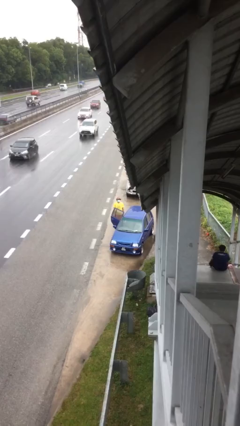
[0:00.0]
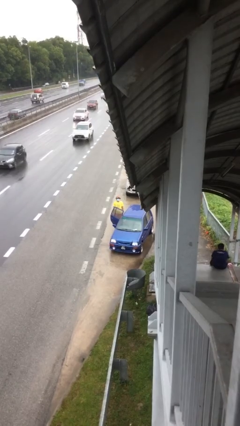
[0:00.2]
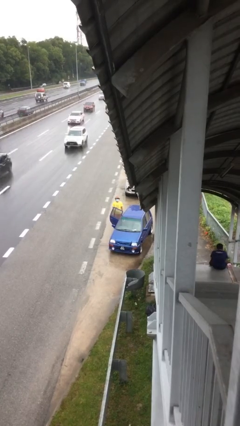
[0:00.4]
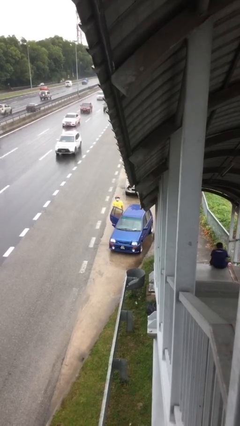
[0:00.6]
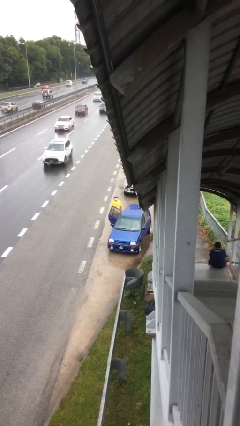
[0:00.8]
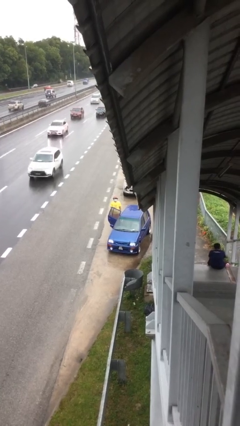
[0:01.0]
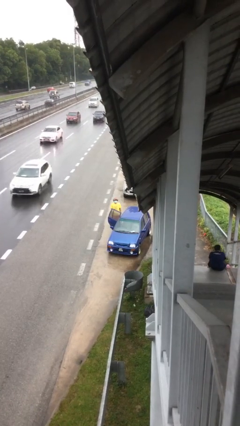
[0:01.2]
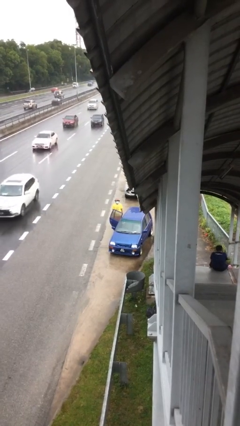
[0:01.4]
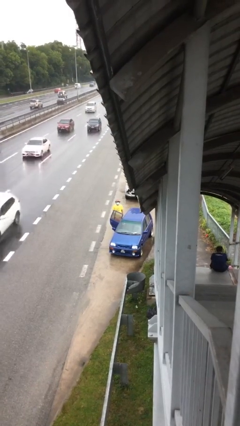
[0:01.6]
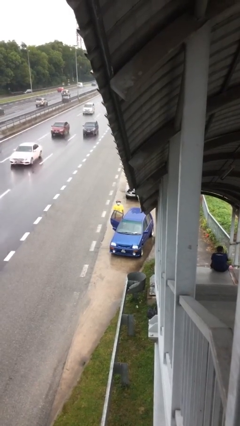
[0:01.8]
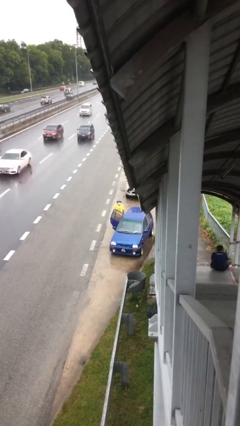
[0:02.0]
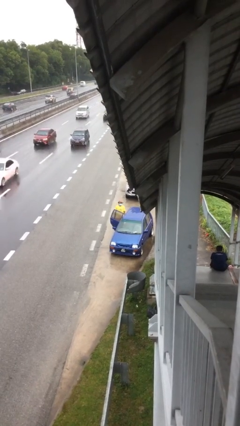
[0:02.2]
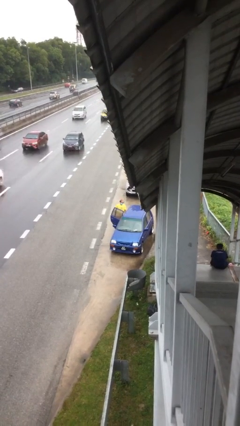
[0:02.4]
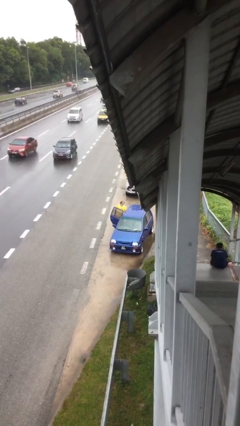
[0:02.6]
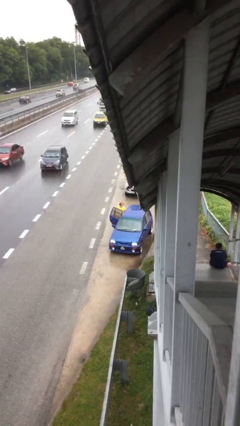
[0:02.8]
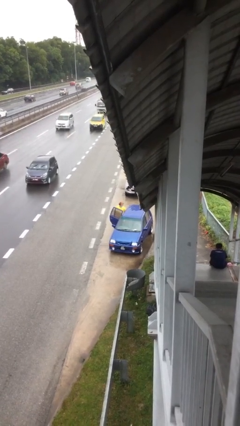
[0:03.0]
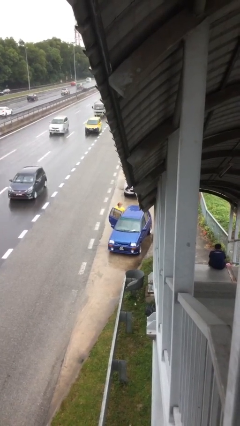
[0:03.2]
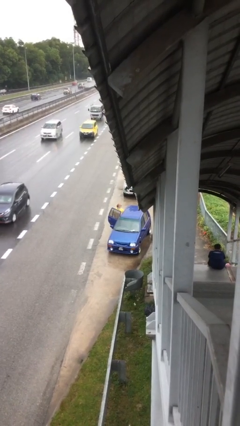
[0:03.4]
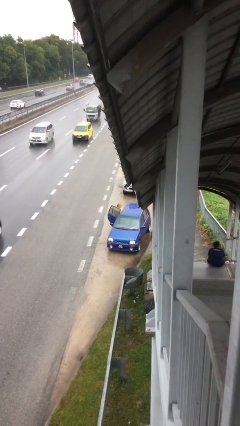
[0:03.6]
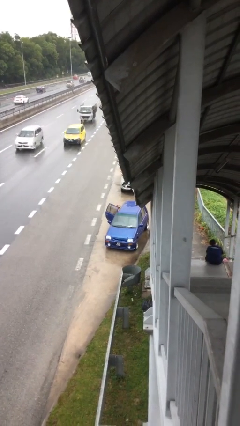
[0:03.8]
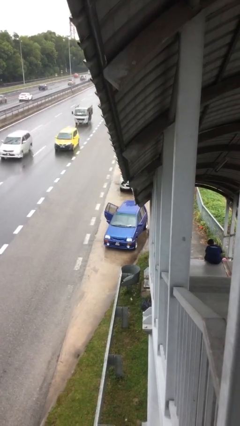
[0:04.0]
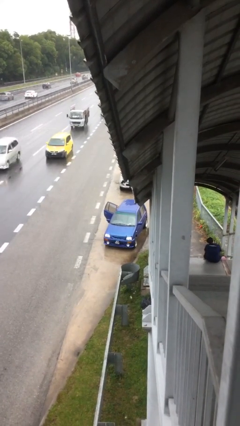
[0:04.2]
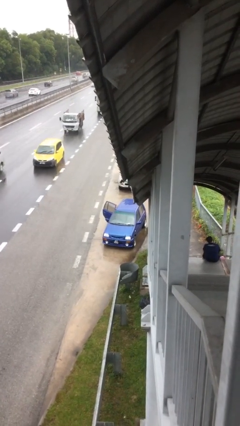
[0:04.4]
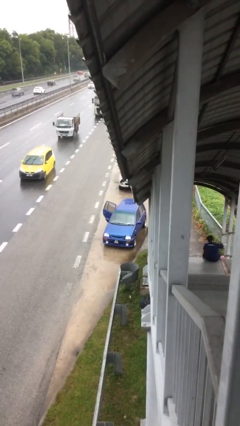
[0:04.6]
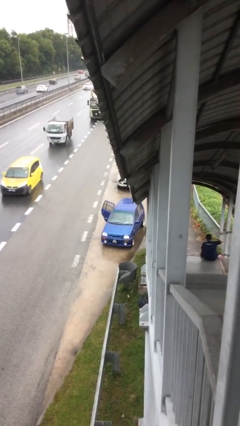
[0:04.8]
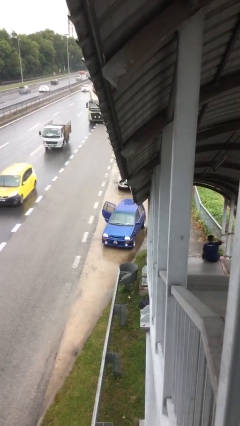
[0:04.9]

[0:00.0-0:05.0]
person enters car

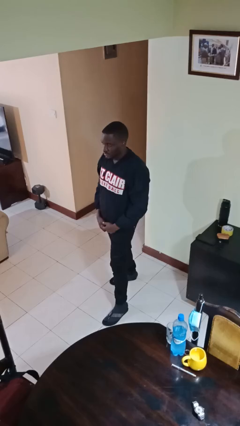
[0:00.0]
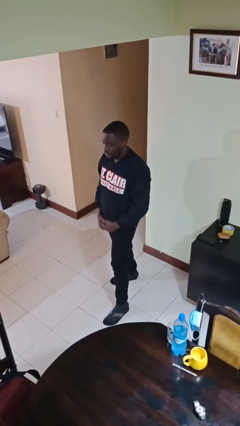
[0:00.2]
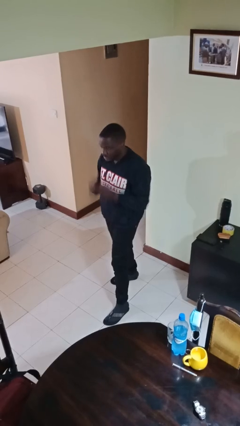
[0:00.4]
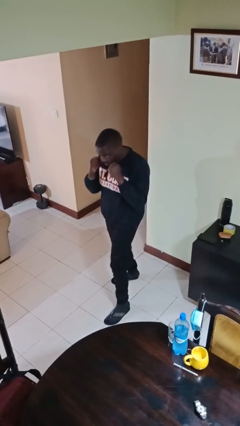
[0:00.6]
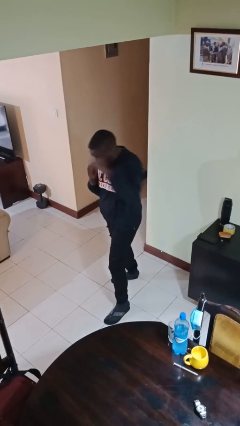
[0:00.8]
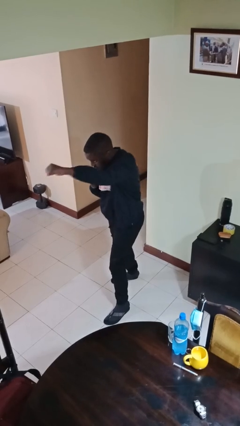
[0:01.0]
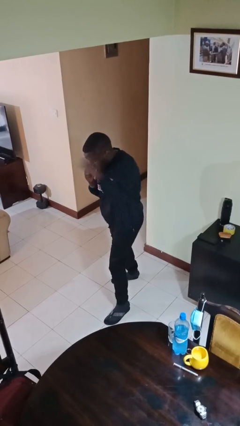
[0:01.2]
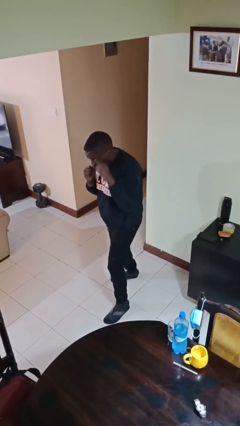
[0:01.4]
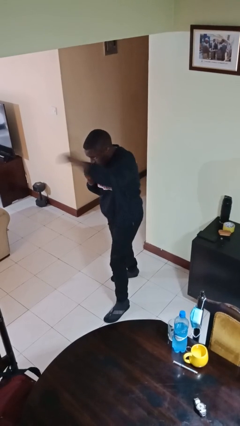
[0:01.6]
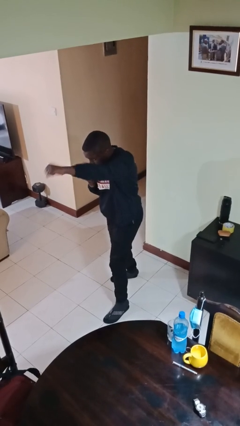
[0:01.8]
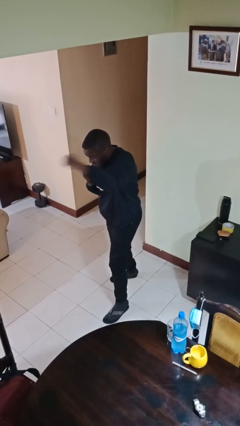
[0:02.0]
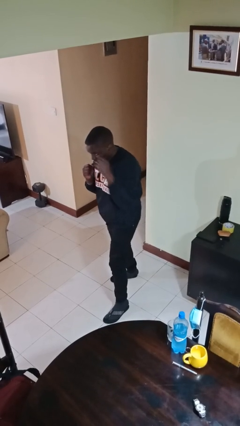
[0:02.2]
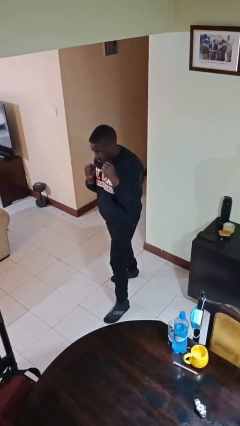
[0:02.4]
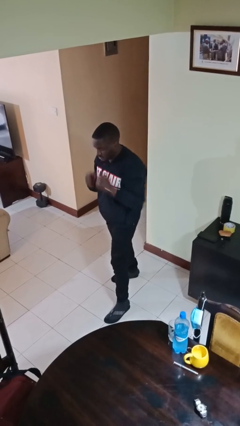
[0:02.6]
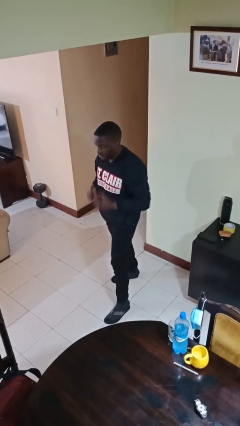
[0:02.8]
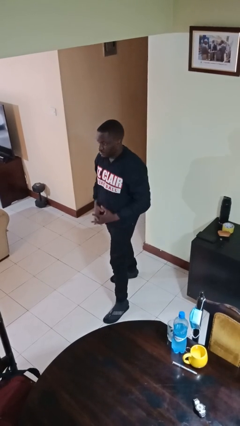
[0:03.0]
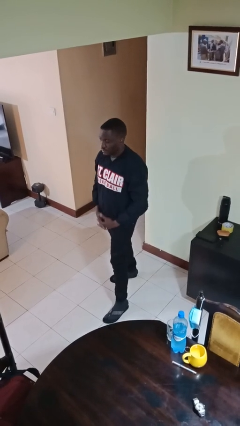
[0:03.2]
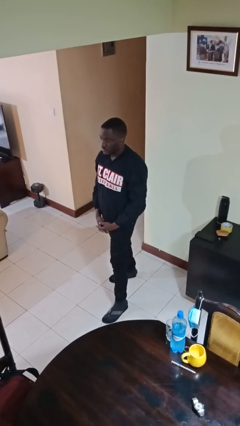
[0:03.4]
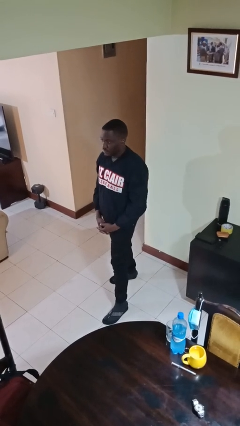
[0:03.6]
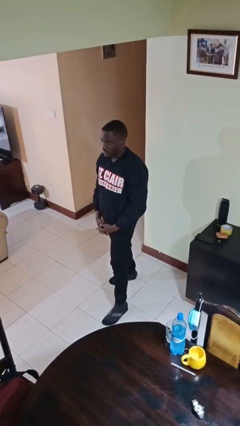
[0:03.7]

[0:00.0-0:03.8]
person punches

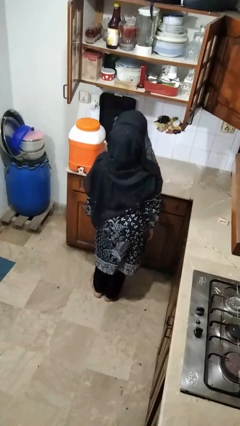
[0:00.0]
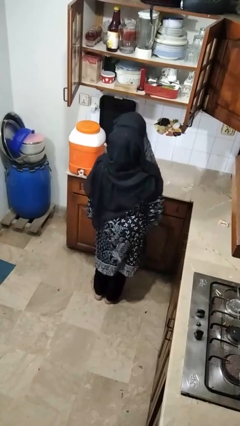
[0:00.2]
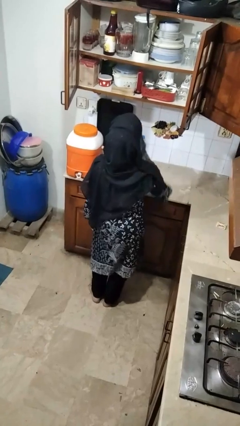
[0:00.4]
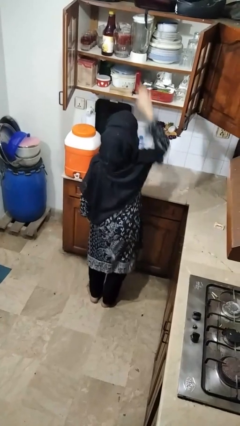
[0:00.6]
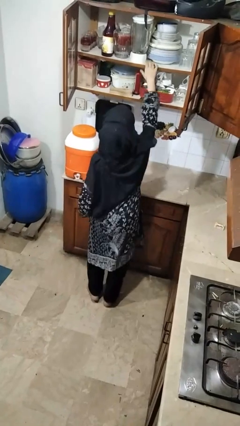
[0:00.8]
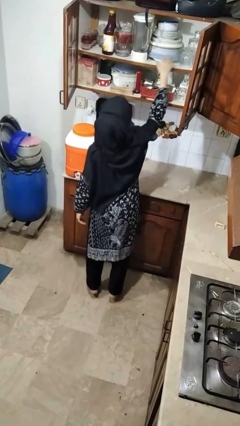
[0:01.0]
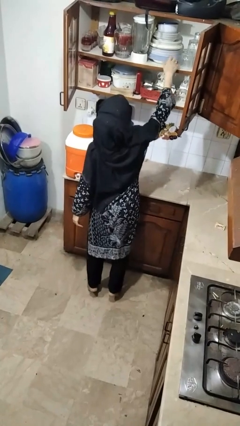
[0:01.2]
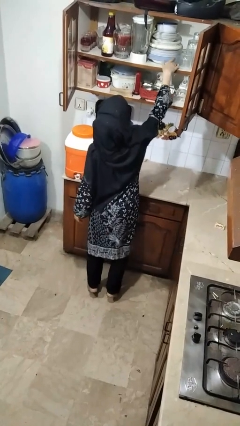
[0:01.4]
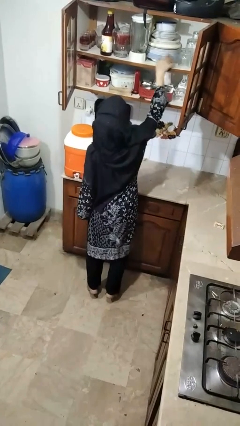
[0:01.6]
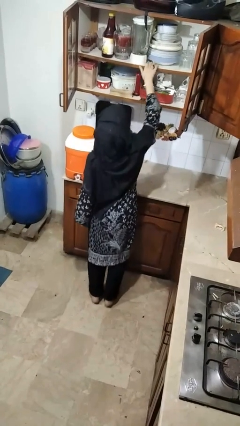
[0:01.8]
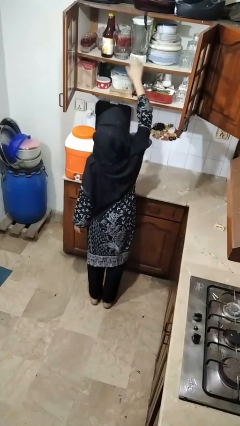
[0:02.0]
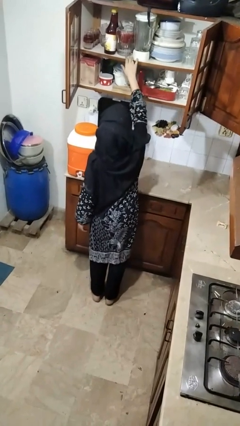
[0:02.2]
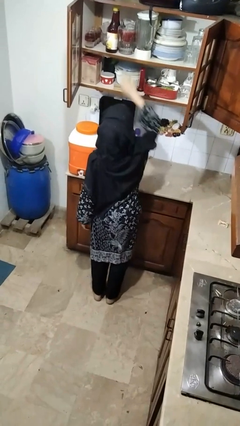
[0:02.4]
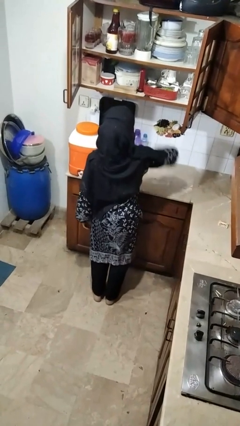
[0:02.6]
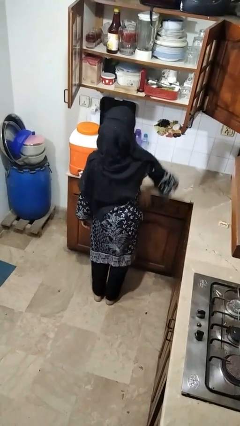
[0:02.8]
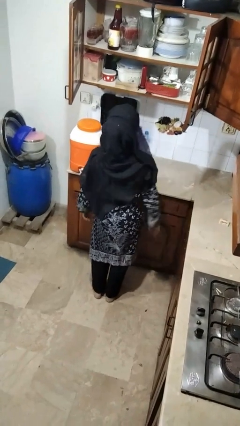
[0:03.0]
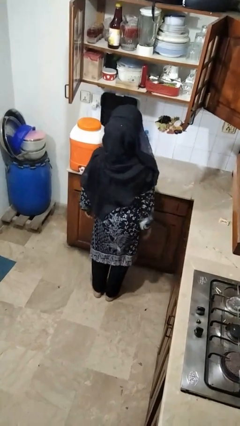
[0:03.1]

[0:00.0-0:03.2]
person searches in cabinet

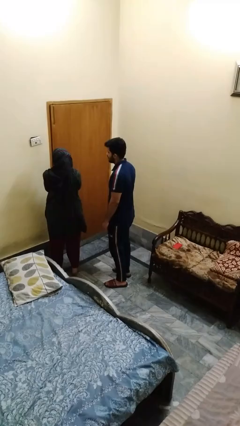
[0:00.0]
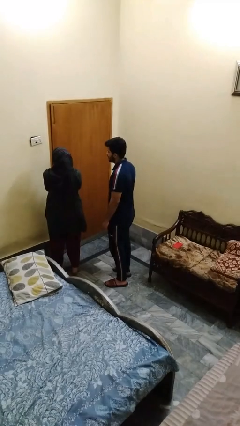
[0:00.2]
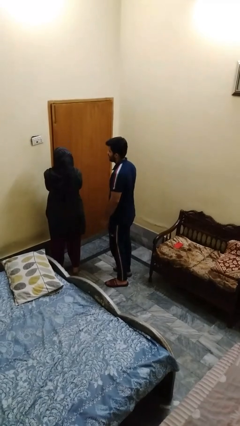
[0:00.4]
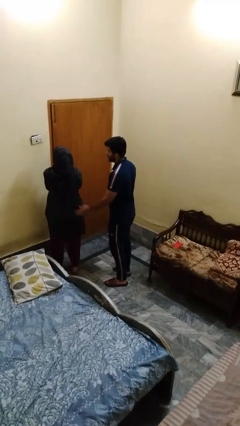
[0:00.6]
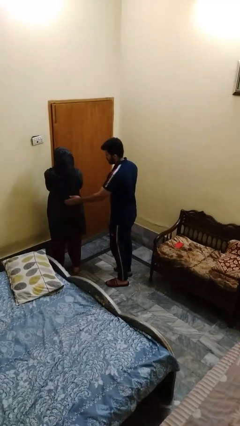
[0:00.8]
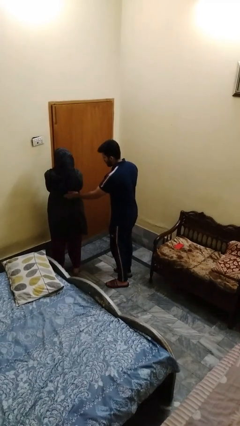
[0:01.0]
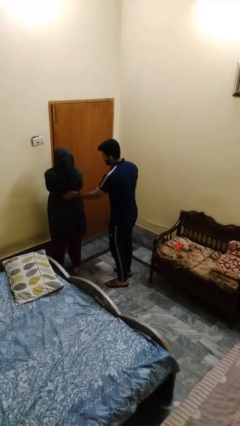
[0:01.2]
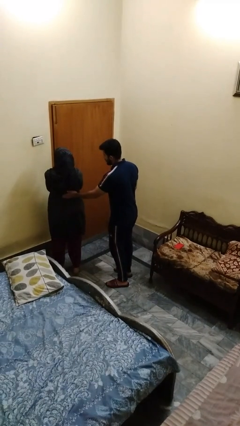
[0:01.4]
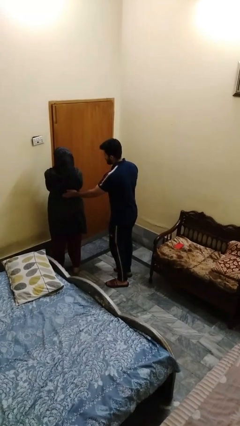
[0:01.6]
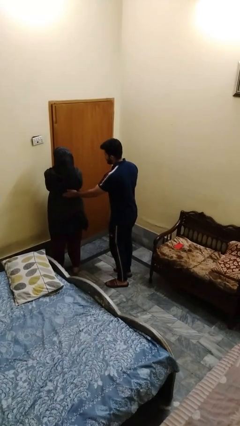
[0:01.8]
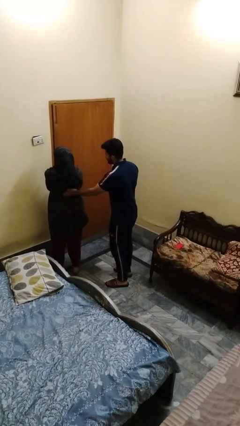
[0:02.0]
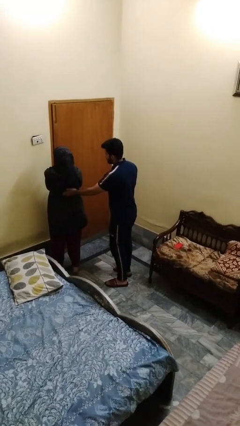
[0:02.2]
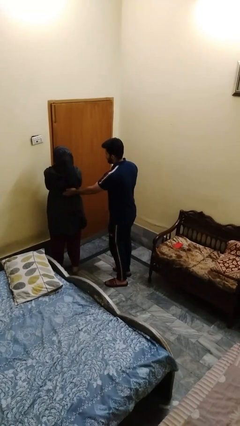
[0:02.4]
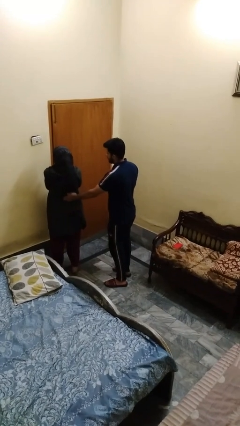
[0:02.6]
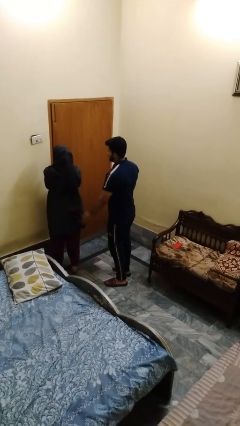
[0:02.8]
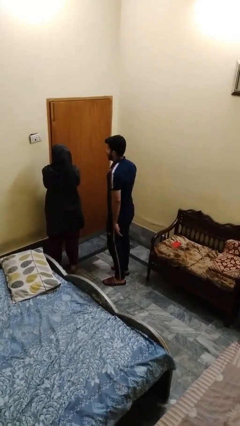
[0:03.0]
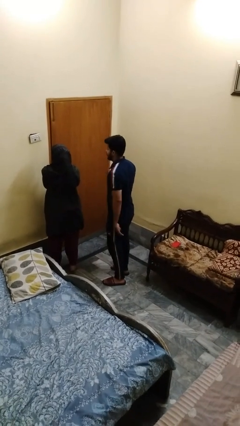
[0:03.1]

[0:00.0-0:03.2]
person touches back of person

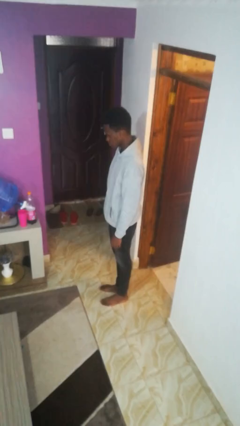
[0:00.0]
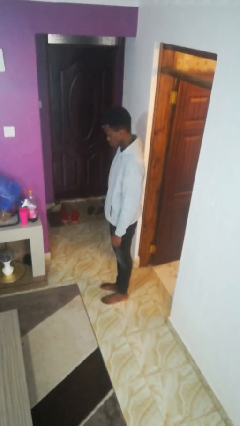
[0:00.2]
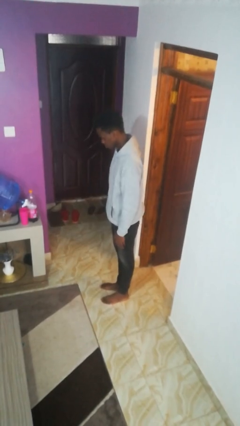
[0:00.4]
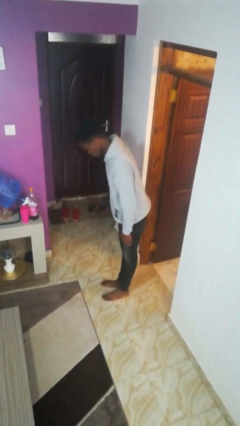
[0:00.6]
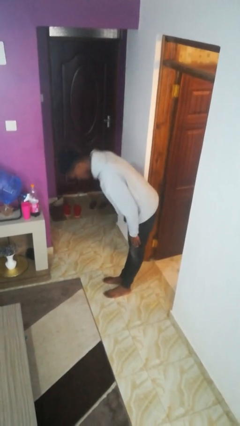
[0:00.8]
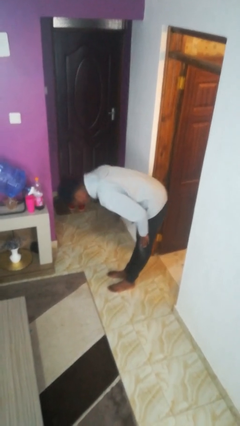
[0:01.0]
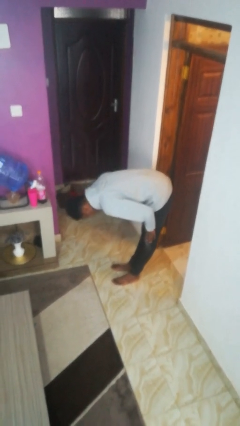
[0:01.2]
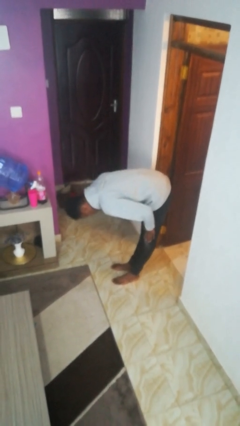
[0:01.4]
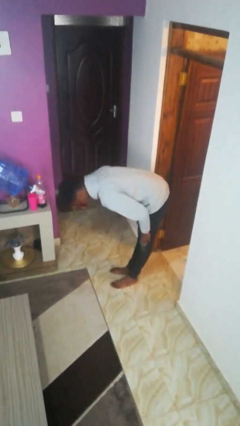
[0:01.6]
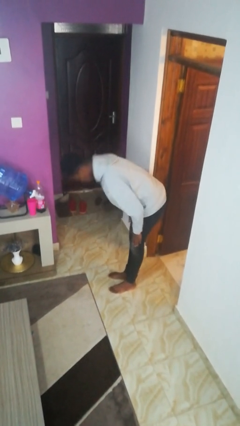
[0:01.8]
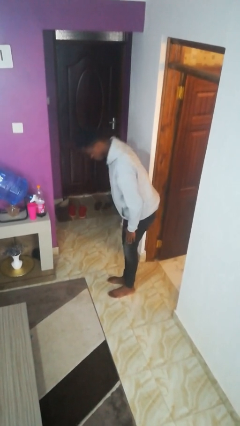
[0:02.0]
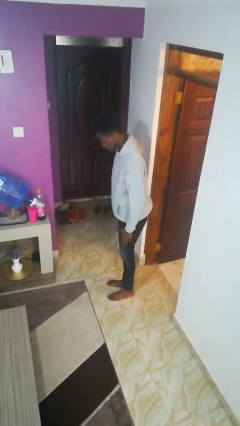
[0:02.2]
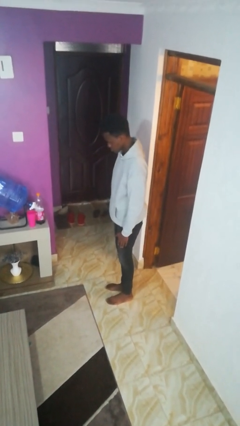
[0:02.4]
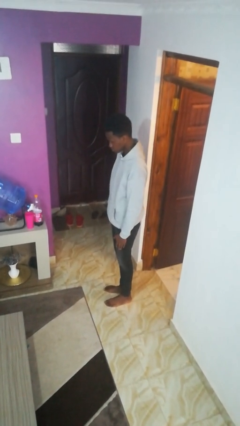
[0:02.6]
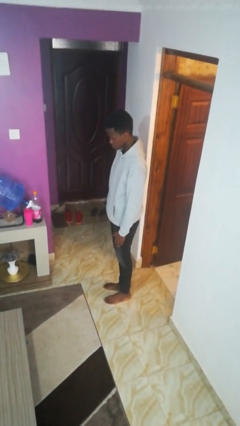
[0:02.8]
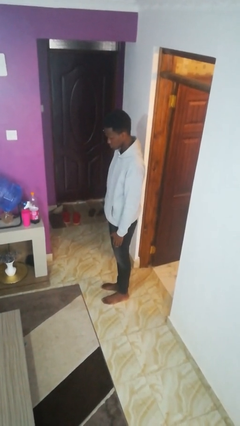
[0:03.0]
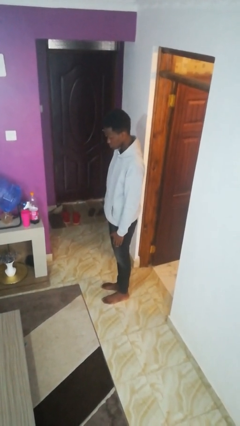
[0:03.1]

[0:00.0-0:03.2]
person bows
